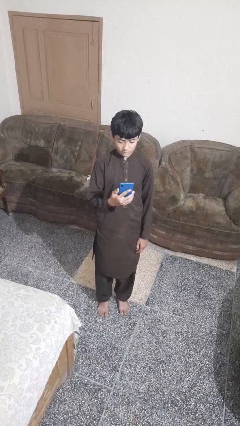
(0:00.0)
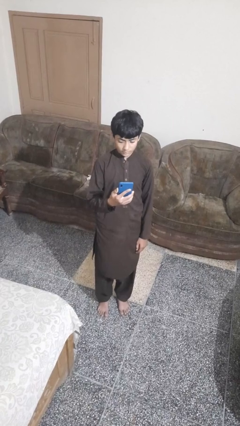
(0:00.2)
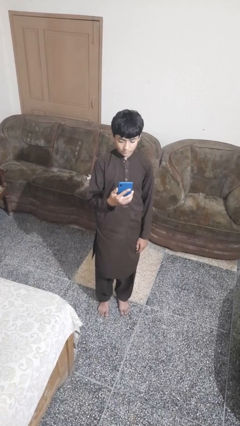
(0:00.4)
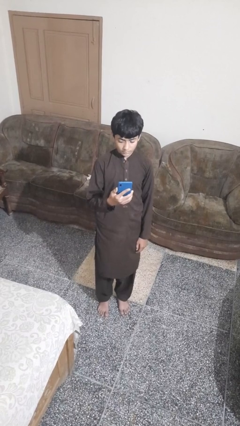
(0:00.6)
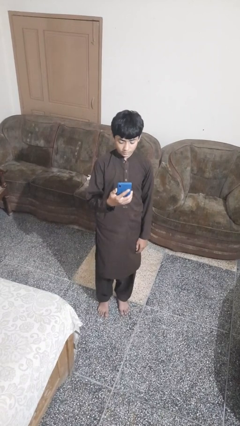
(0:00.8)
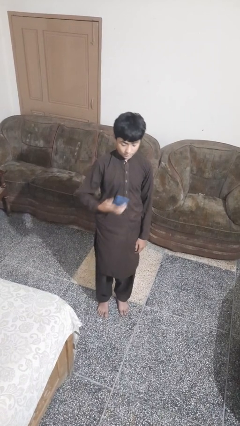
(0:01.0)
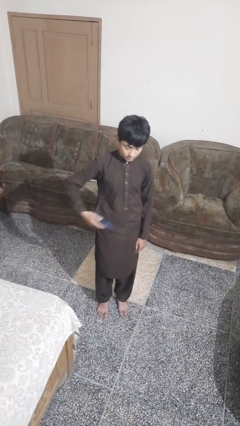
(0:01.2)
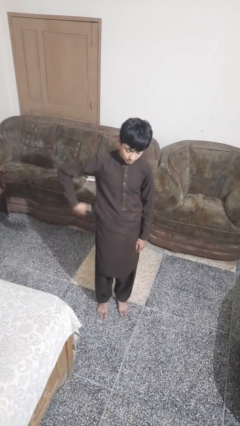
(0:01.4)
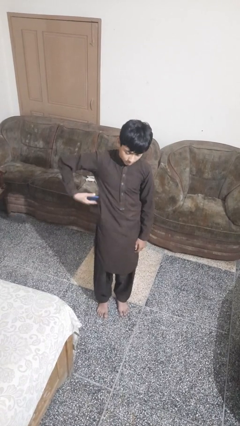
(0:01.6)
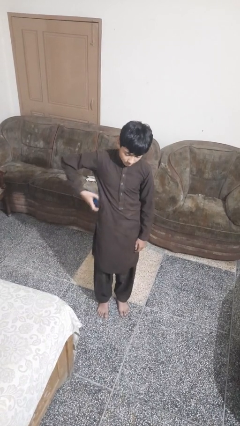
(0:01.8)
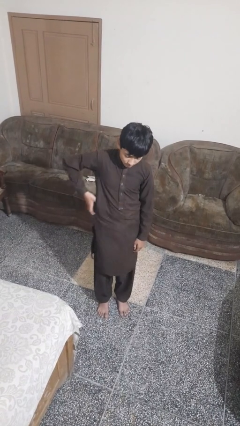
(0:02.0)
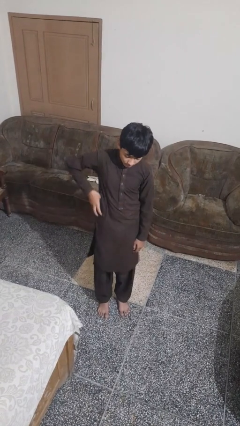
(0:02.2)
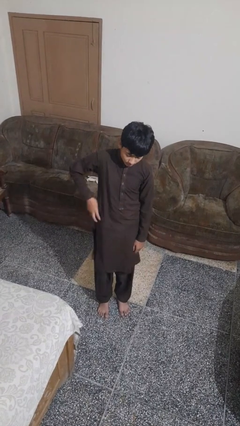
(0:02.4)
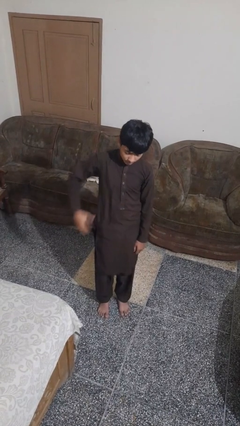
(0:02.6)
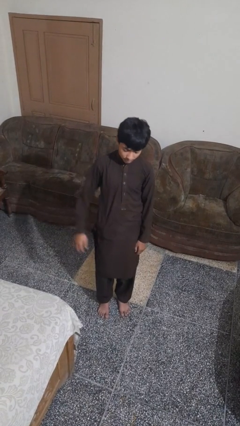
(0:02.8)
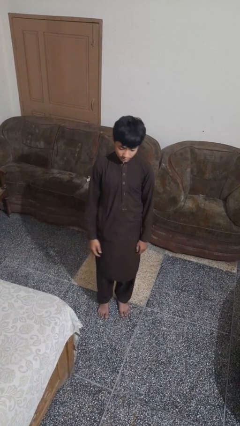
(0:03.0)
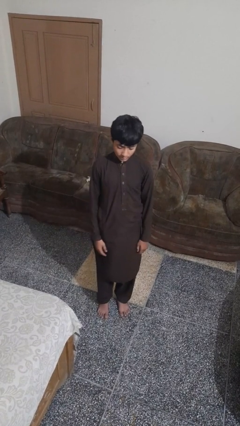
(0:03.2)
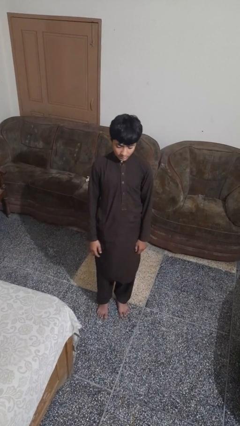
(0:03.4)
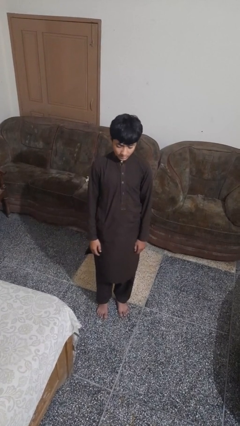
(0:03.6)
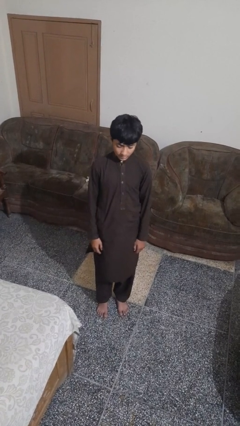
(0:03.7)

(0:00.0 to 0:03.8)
person puts phone into pocket

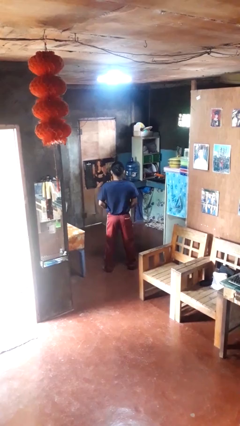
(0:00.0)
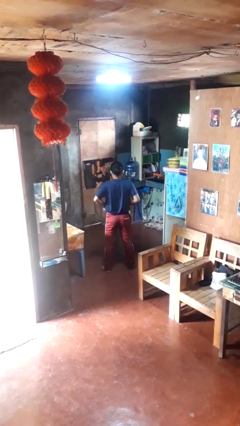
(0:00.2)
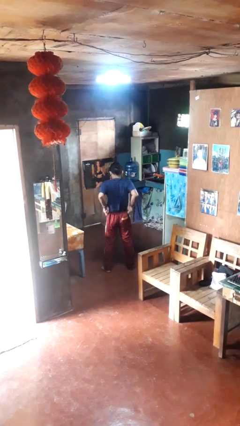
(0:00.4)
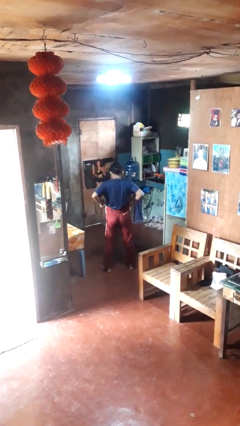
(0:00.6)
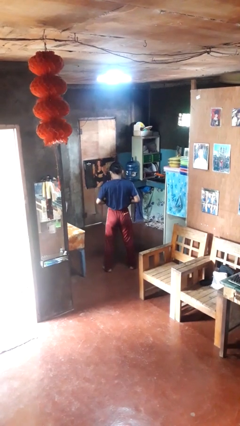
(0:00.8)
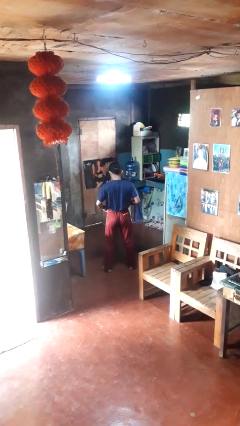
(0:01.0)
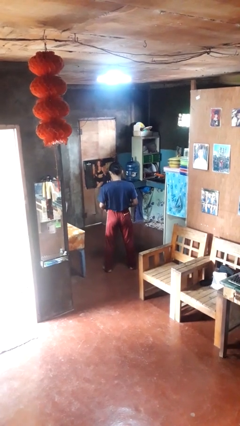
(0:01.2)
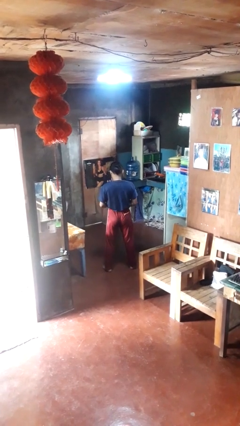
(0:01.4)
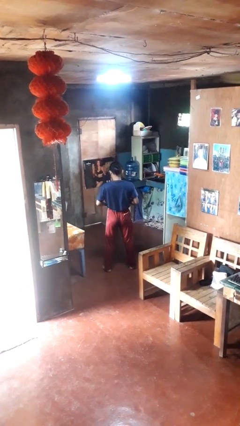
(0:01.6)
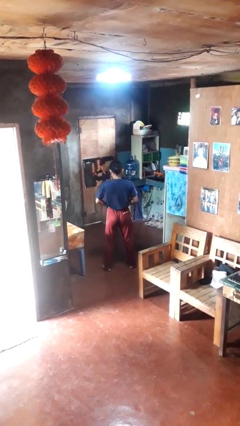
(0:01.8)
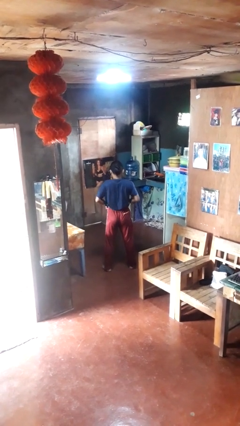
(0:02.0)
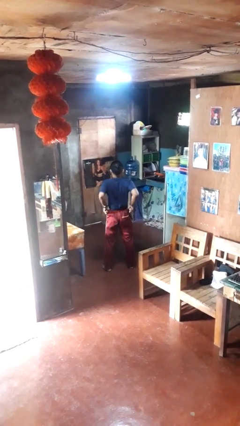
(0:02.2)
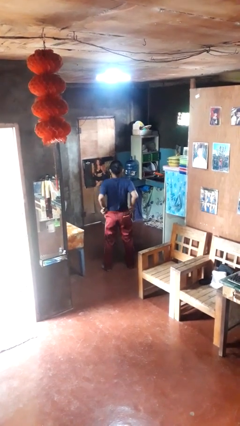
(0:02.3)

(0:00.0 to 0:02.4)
person hikes up pants

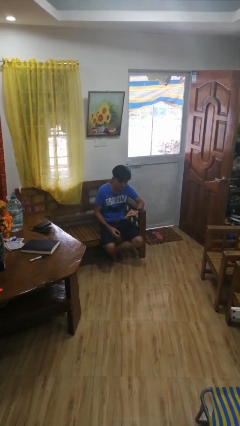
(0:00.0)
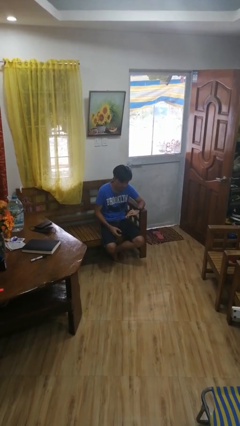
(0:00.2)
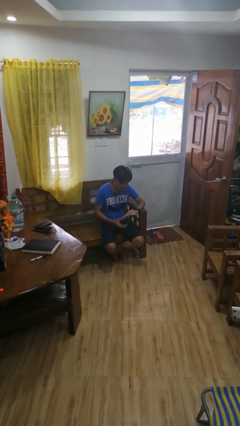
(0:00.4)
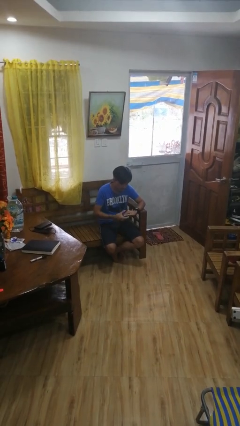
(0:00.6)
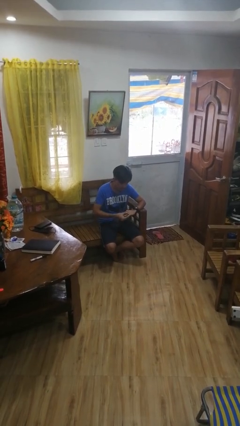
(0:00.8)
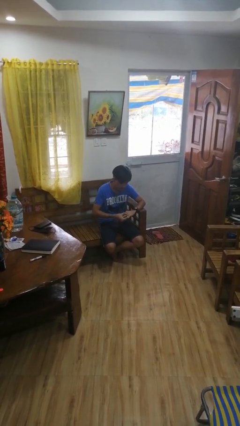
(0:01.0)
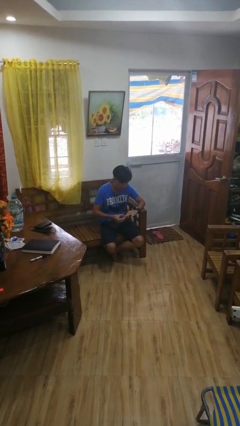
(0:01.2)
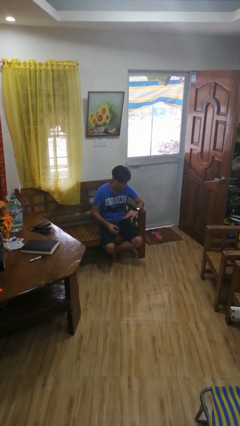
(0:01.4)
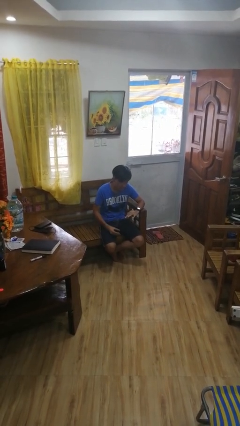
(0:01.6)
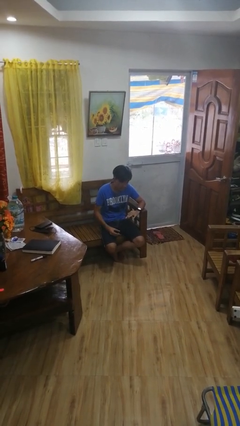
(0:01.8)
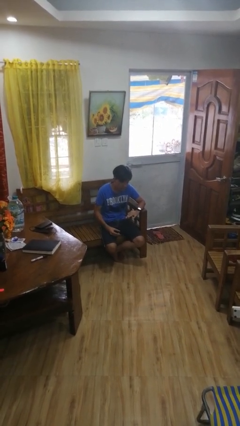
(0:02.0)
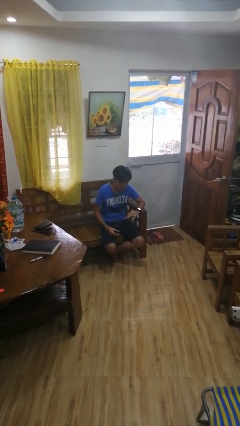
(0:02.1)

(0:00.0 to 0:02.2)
person takes off ring

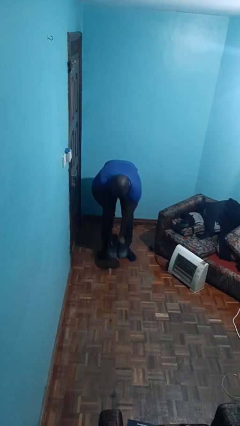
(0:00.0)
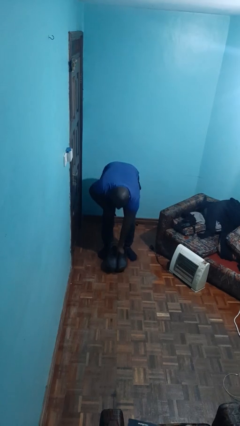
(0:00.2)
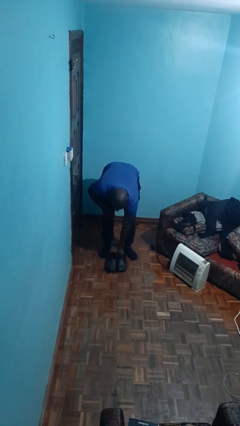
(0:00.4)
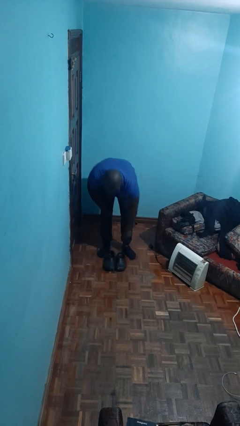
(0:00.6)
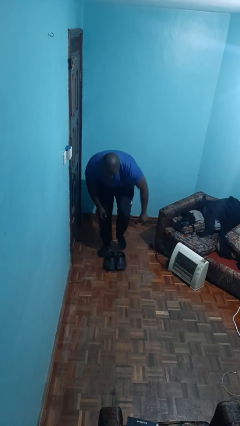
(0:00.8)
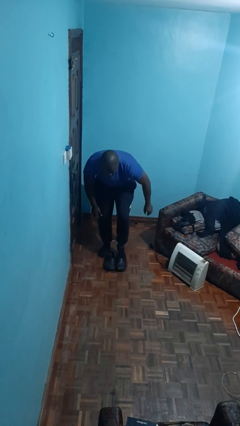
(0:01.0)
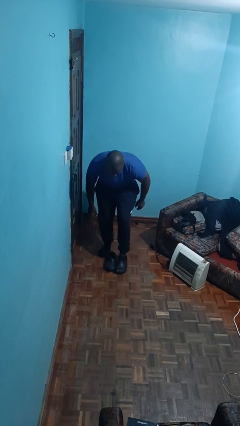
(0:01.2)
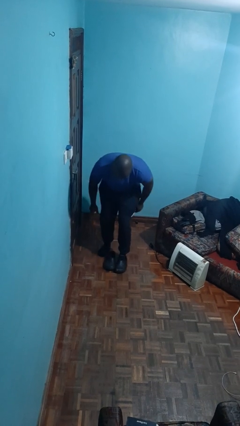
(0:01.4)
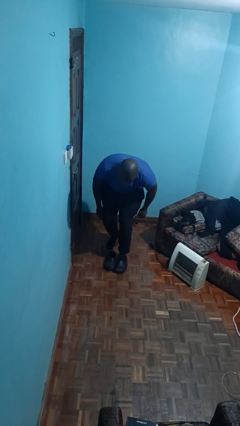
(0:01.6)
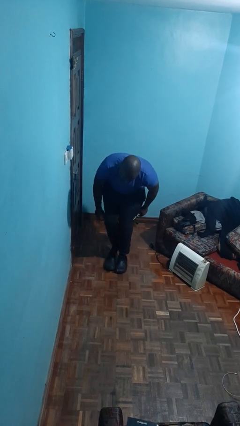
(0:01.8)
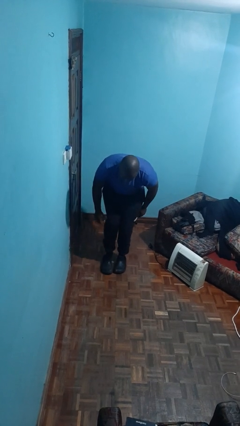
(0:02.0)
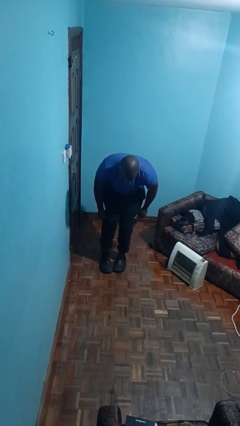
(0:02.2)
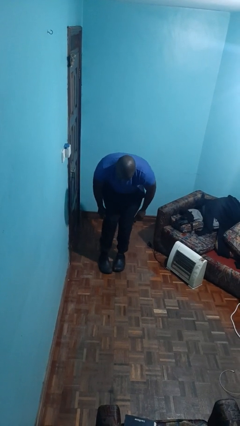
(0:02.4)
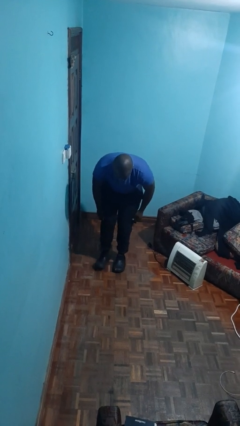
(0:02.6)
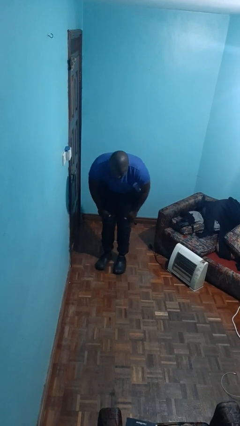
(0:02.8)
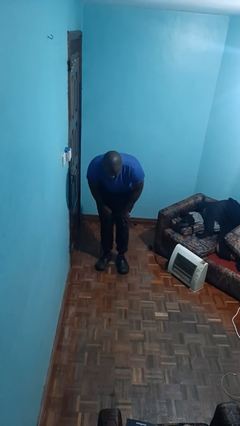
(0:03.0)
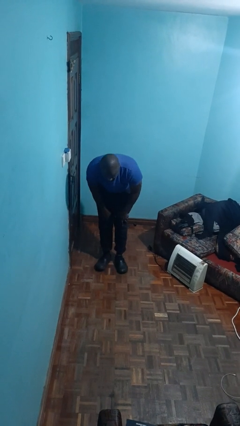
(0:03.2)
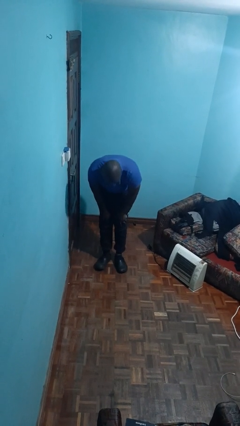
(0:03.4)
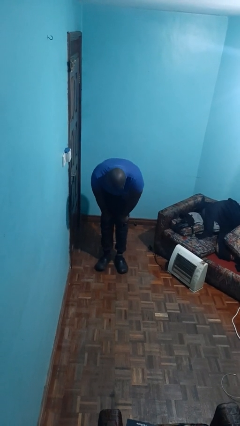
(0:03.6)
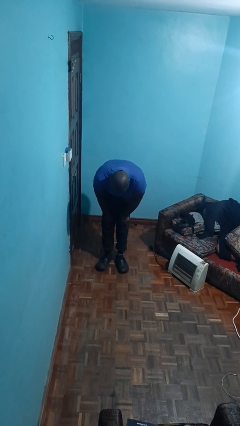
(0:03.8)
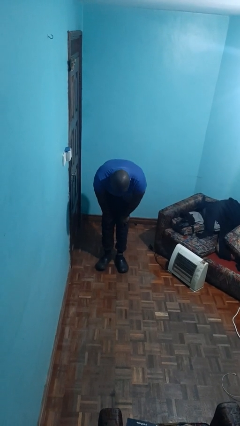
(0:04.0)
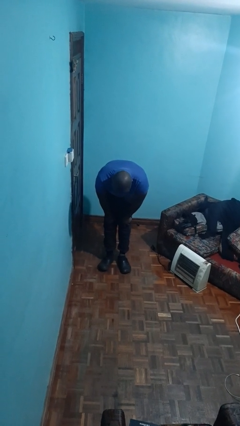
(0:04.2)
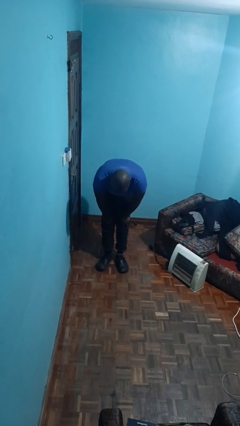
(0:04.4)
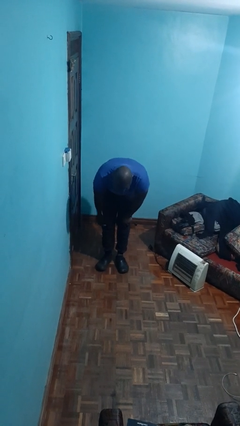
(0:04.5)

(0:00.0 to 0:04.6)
person puts on shoes

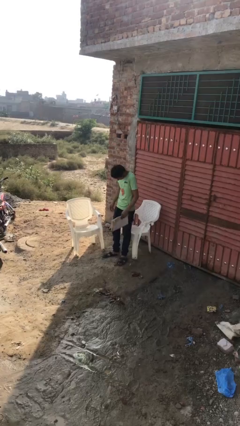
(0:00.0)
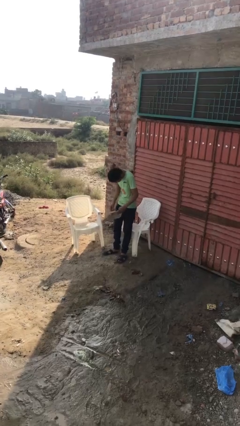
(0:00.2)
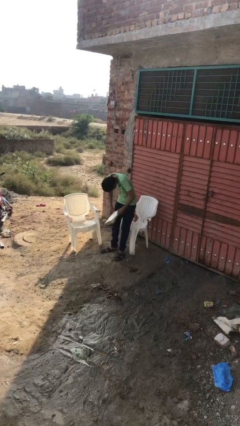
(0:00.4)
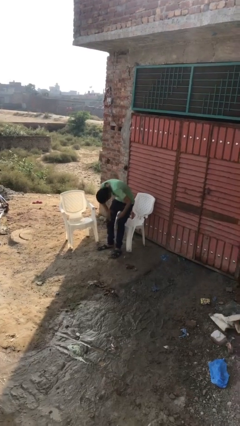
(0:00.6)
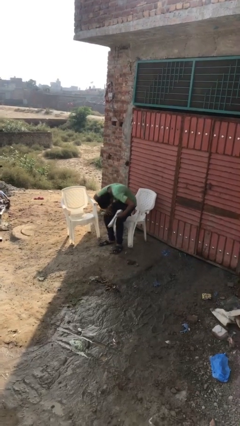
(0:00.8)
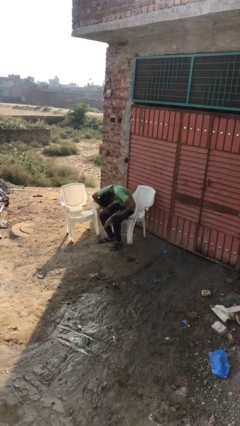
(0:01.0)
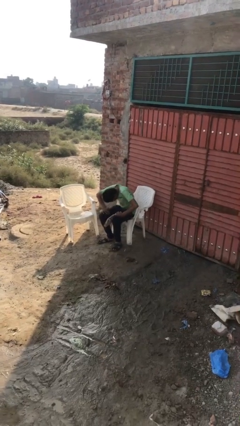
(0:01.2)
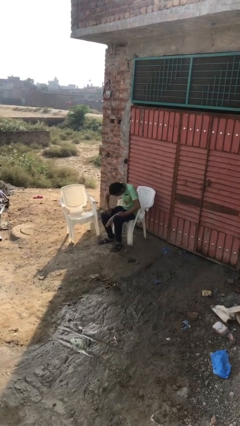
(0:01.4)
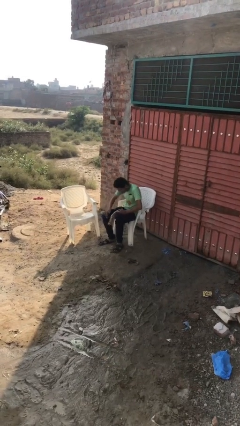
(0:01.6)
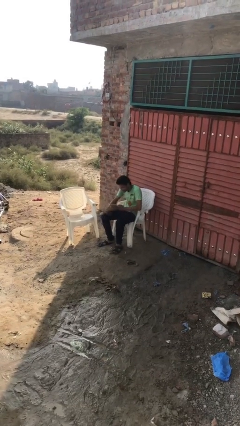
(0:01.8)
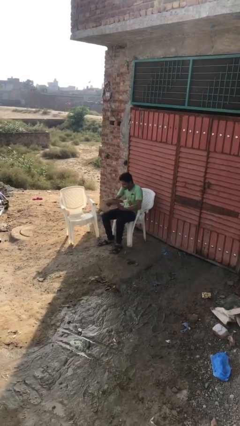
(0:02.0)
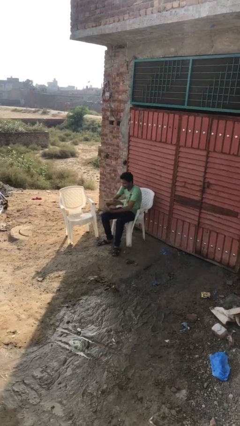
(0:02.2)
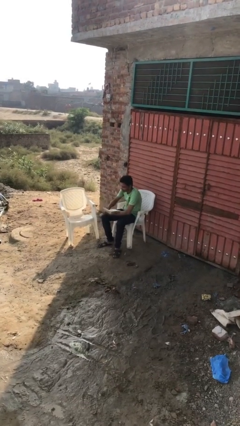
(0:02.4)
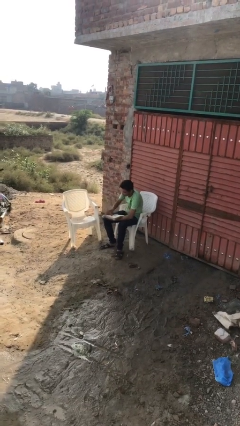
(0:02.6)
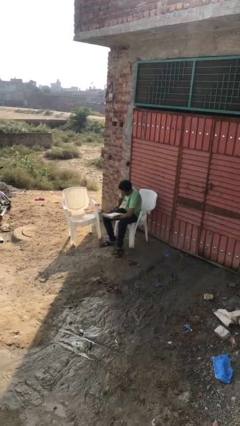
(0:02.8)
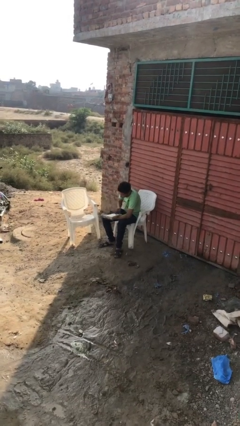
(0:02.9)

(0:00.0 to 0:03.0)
person sits down

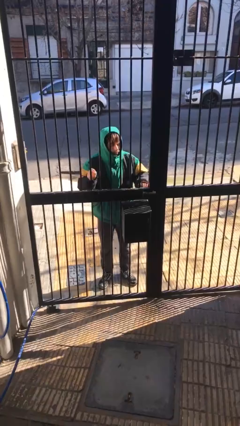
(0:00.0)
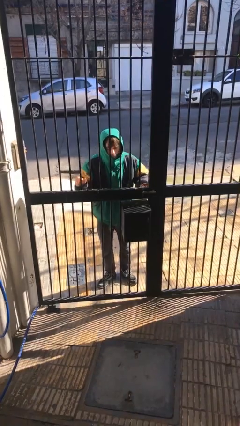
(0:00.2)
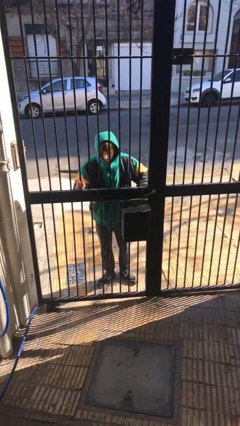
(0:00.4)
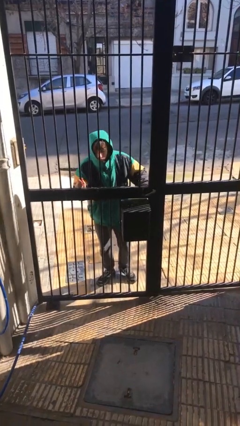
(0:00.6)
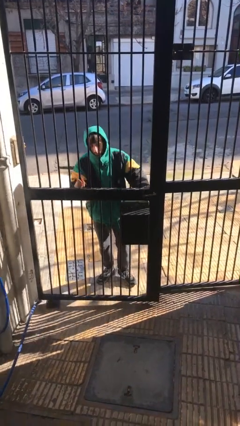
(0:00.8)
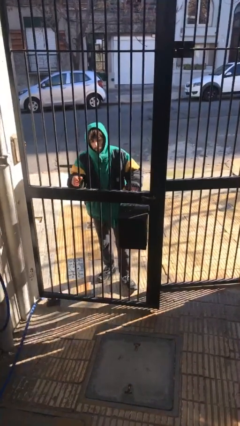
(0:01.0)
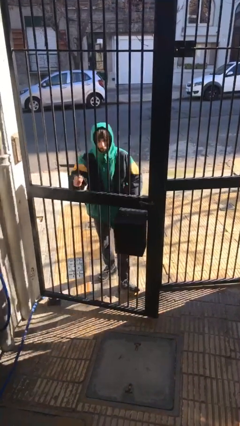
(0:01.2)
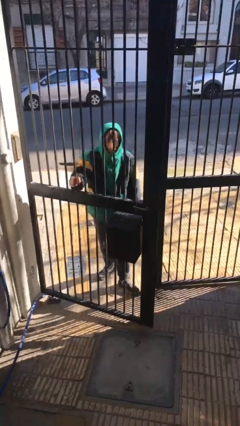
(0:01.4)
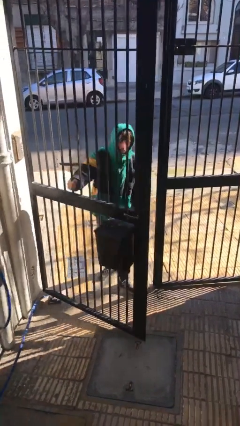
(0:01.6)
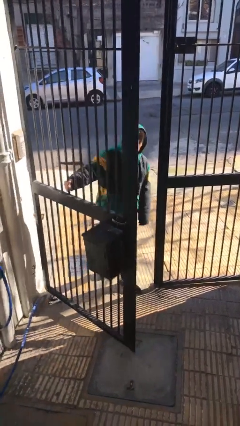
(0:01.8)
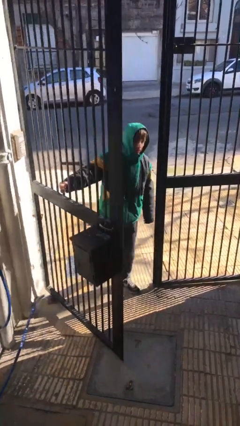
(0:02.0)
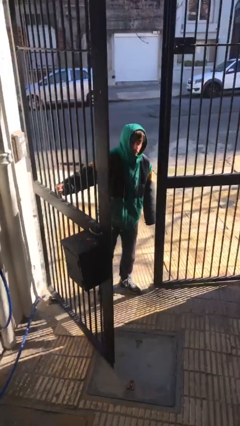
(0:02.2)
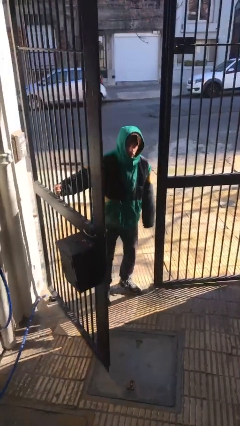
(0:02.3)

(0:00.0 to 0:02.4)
person opens gate
